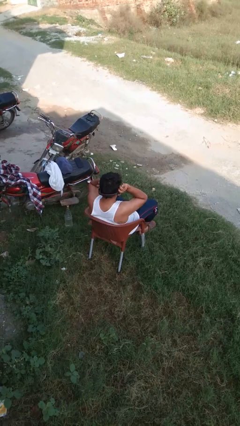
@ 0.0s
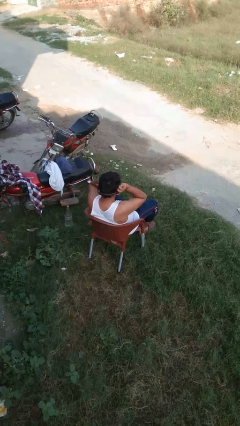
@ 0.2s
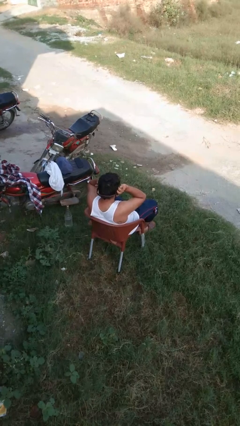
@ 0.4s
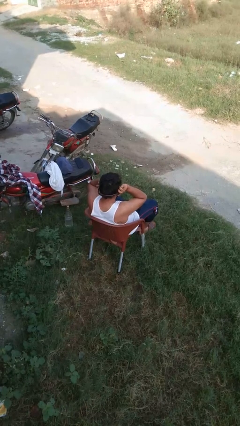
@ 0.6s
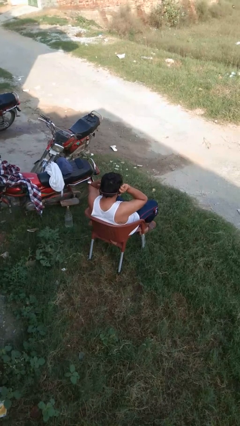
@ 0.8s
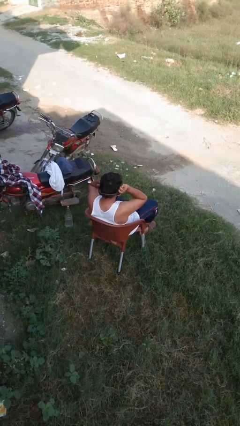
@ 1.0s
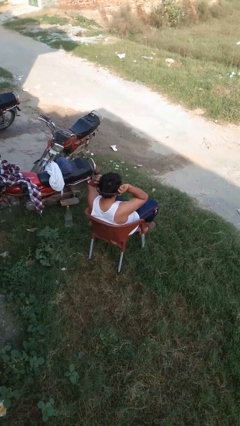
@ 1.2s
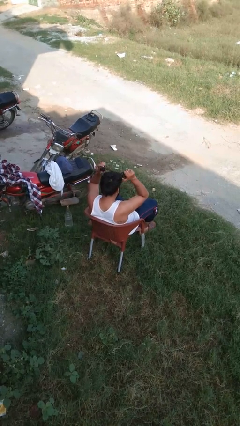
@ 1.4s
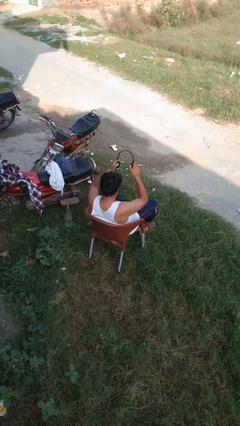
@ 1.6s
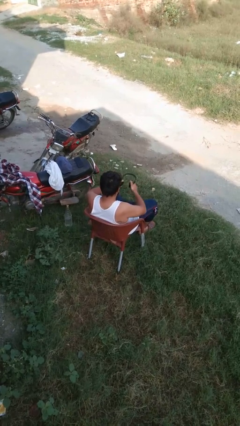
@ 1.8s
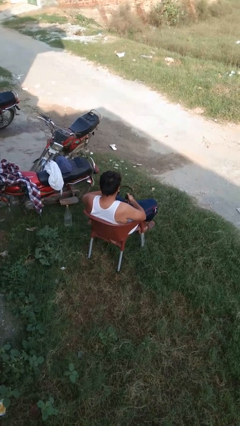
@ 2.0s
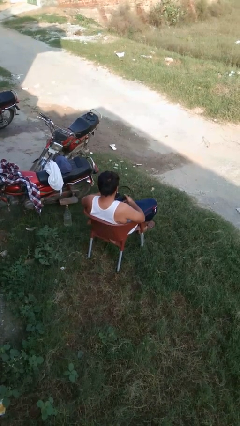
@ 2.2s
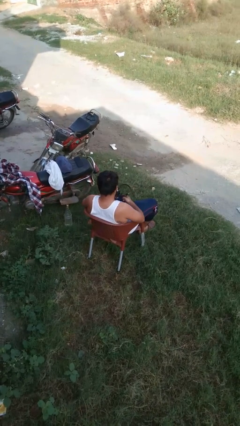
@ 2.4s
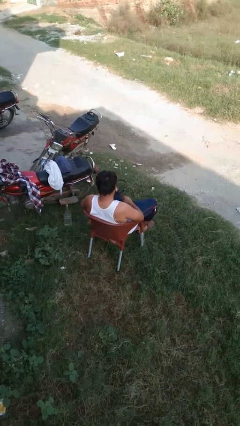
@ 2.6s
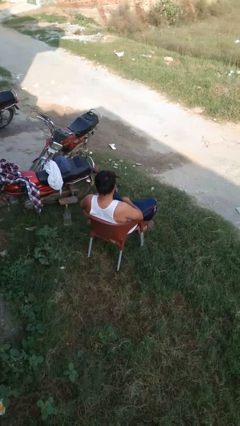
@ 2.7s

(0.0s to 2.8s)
person takes off headphones

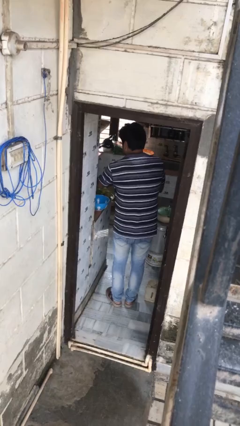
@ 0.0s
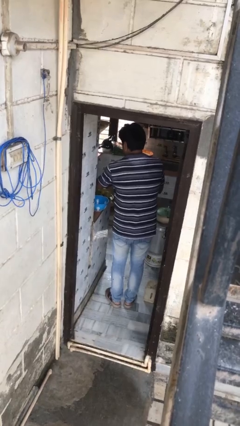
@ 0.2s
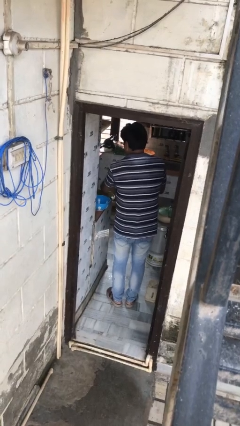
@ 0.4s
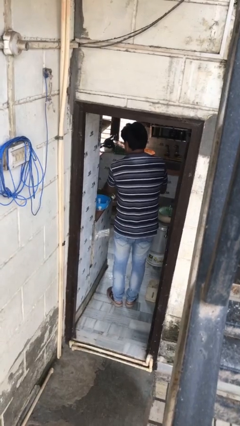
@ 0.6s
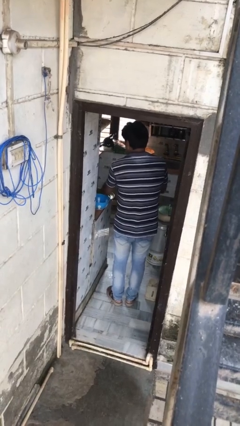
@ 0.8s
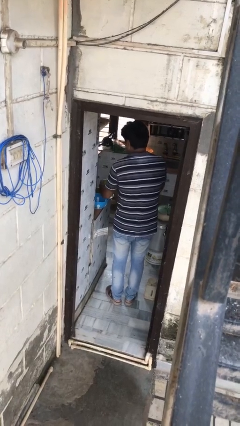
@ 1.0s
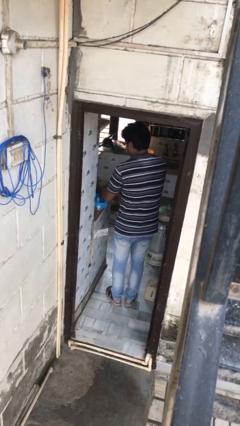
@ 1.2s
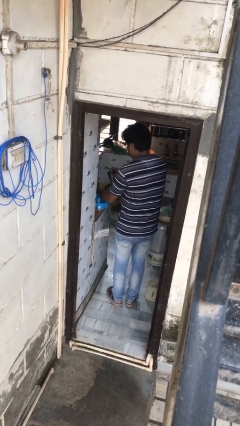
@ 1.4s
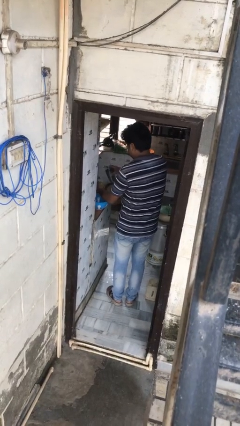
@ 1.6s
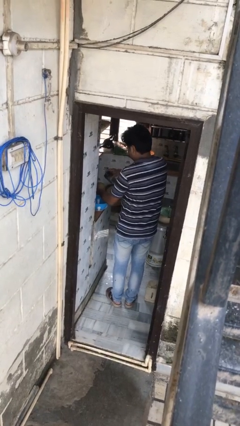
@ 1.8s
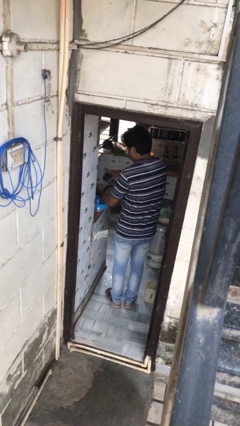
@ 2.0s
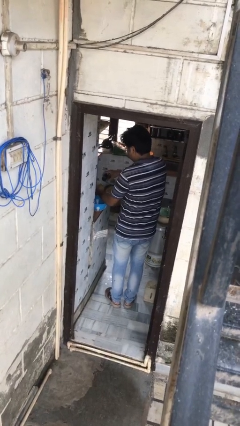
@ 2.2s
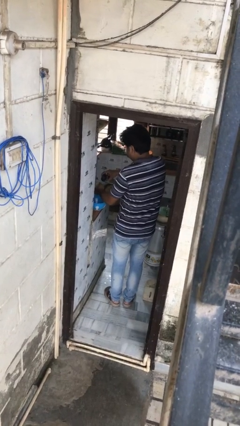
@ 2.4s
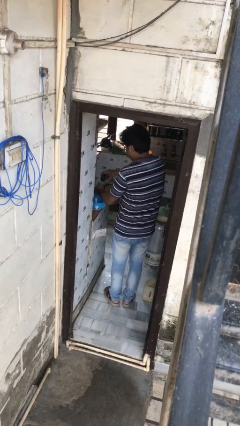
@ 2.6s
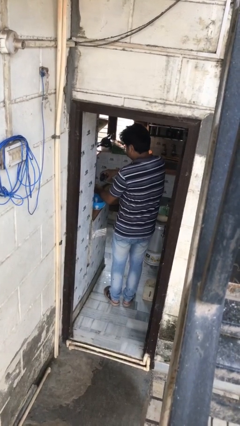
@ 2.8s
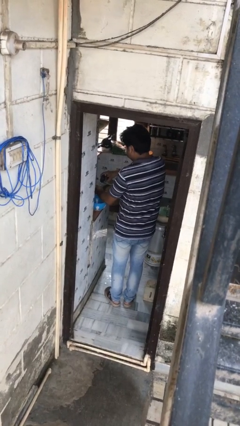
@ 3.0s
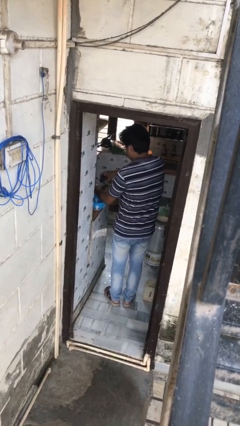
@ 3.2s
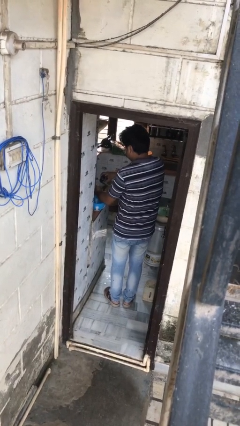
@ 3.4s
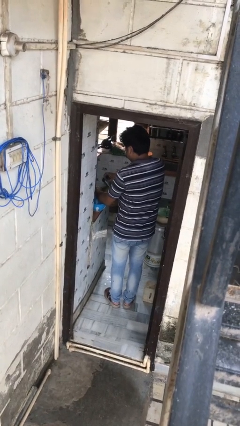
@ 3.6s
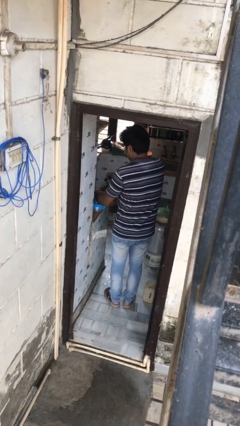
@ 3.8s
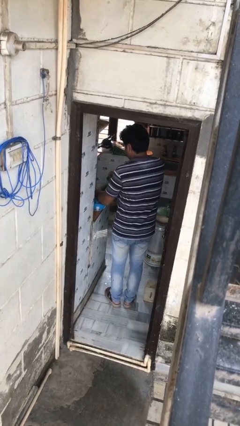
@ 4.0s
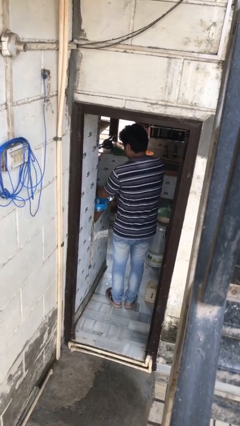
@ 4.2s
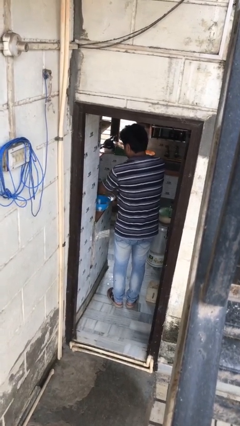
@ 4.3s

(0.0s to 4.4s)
person washes dish

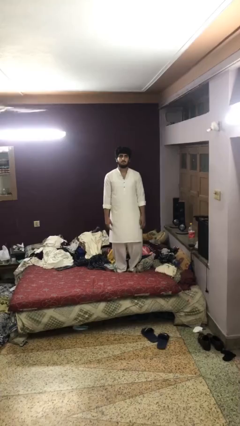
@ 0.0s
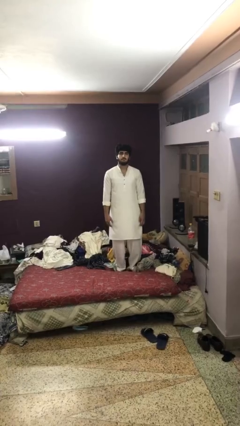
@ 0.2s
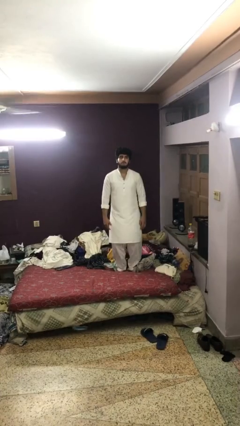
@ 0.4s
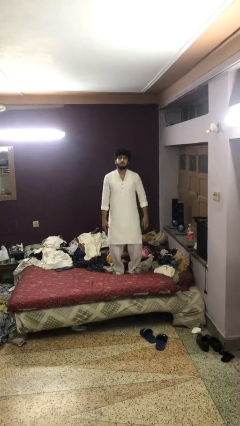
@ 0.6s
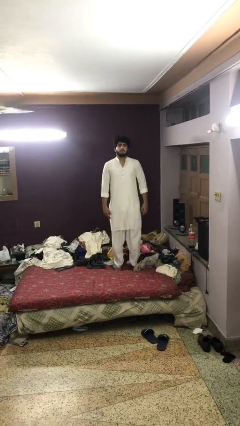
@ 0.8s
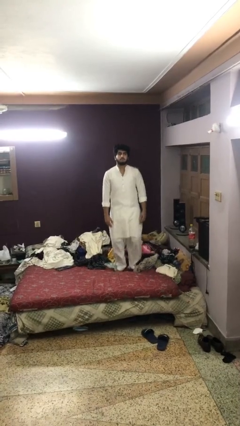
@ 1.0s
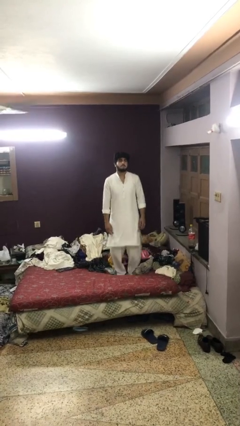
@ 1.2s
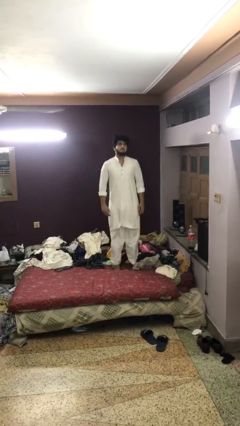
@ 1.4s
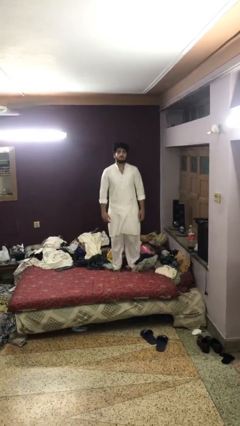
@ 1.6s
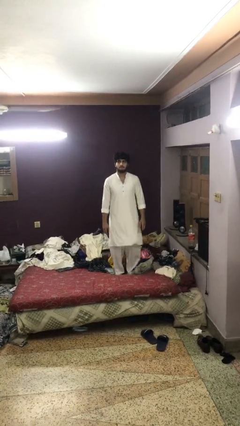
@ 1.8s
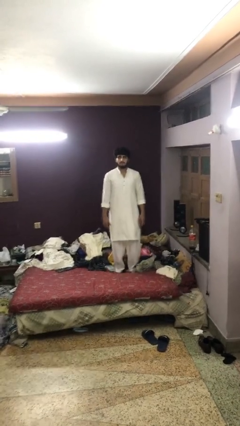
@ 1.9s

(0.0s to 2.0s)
person jumps on bed

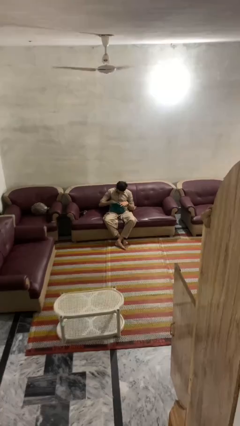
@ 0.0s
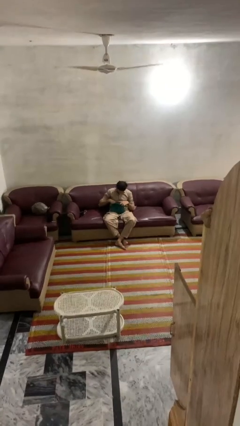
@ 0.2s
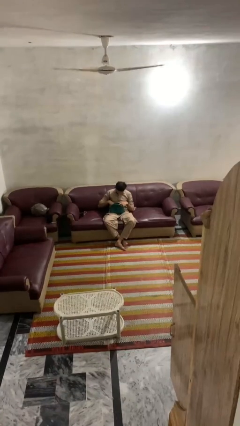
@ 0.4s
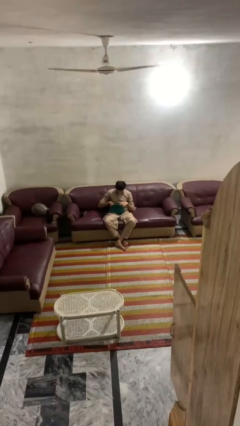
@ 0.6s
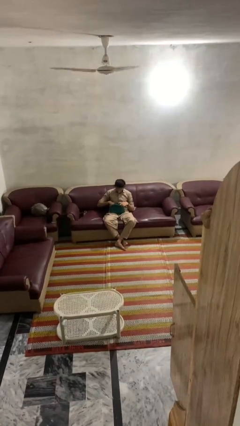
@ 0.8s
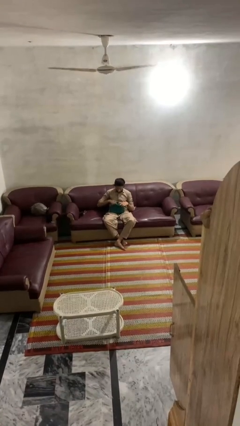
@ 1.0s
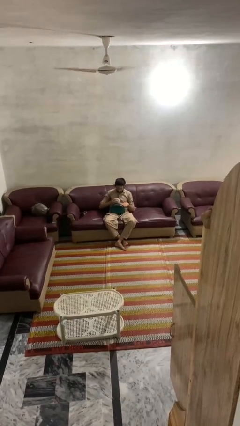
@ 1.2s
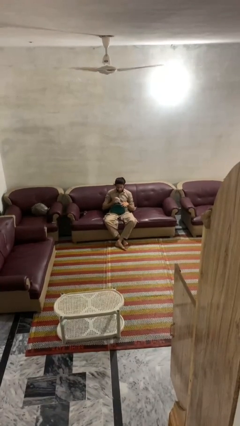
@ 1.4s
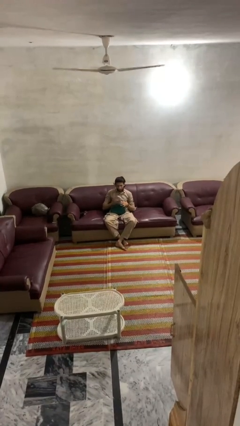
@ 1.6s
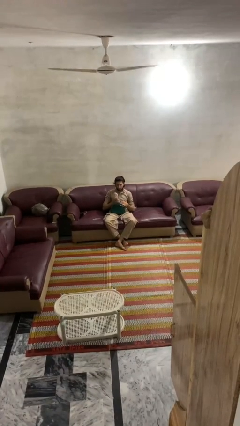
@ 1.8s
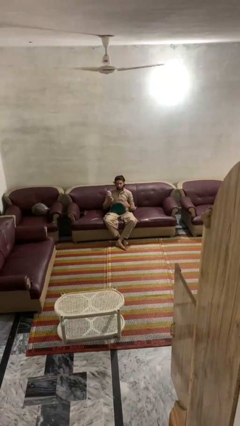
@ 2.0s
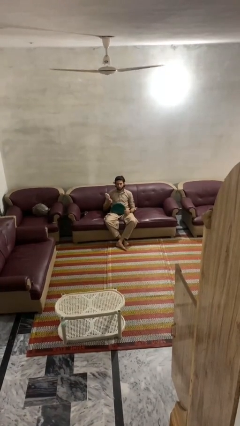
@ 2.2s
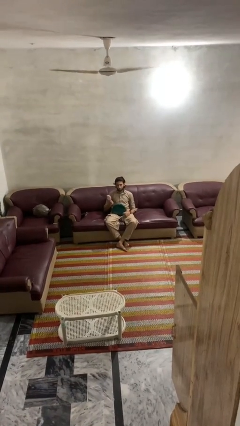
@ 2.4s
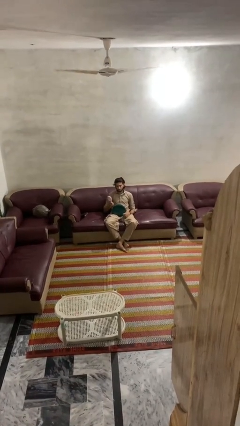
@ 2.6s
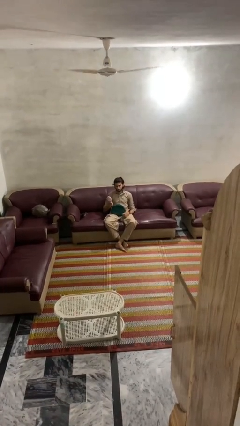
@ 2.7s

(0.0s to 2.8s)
person takes object from purse

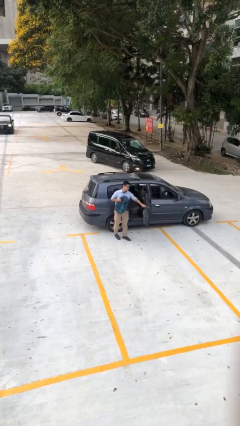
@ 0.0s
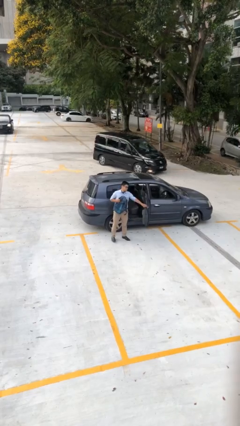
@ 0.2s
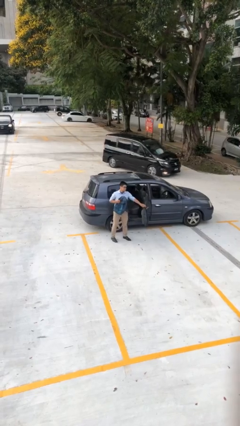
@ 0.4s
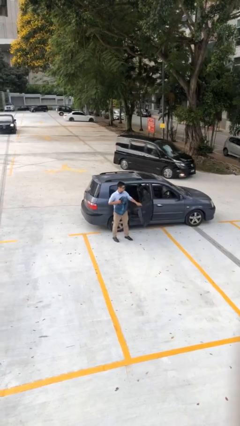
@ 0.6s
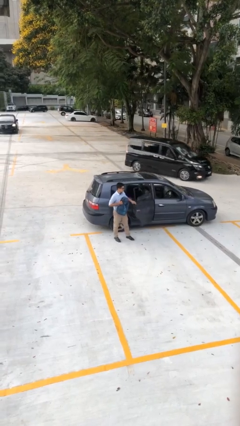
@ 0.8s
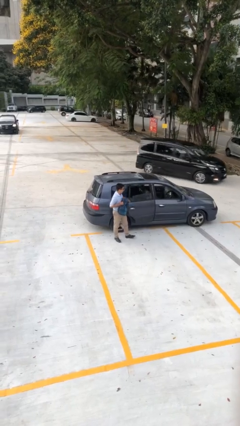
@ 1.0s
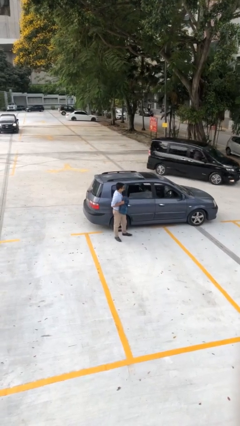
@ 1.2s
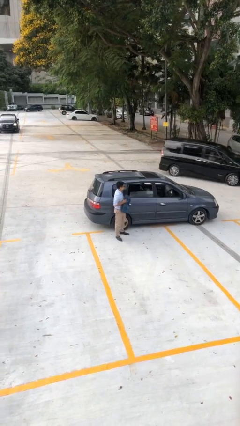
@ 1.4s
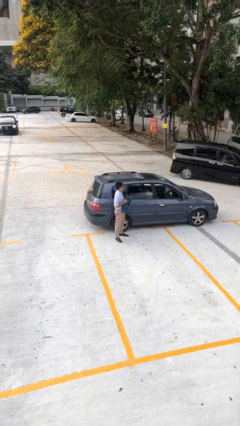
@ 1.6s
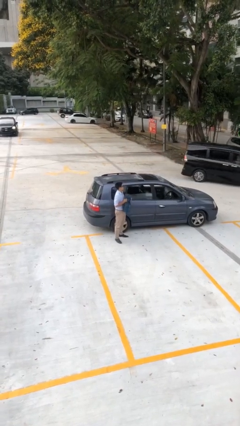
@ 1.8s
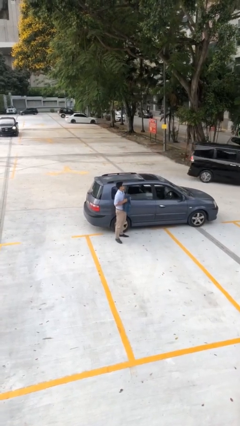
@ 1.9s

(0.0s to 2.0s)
person closes car door

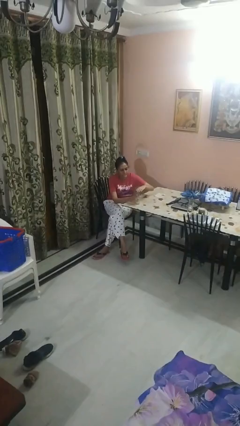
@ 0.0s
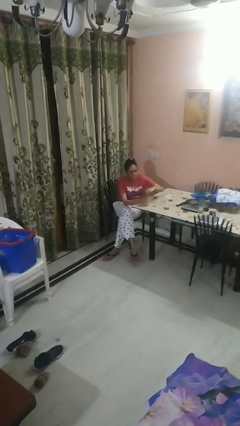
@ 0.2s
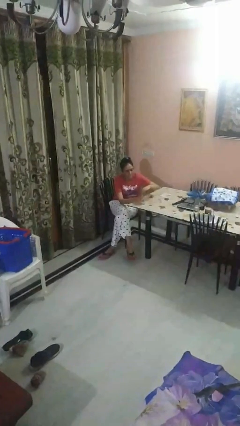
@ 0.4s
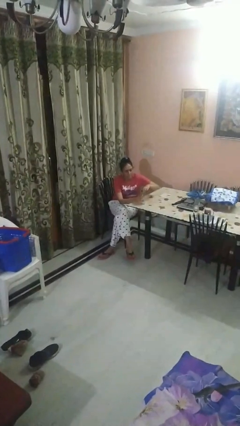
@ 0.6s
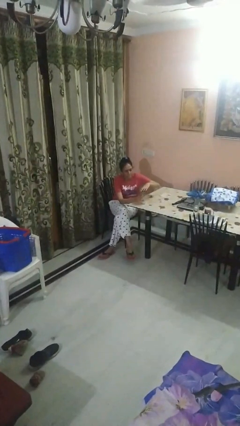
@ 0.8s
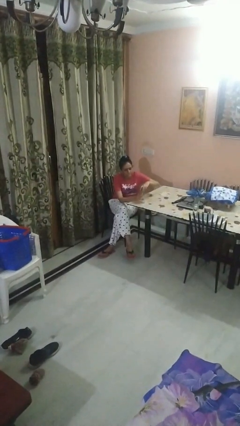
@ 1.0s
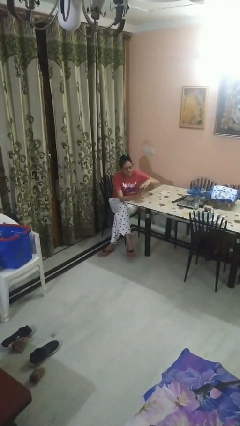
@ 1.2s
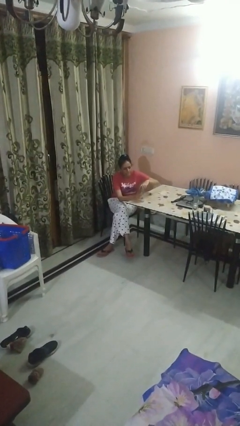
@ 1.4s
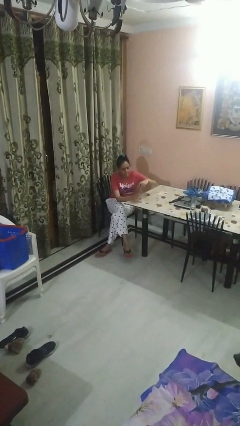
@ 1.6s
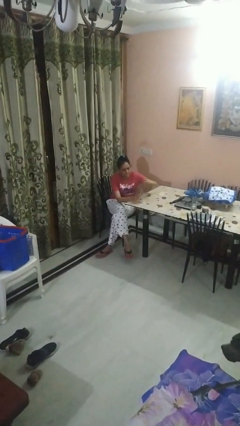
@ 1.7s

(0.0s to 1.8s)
person unscrews lid from bottle

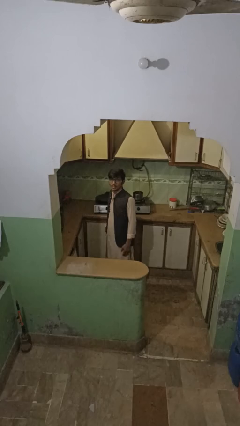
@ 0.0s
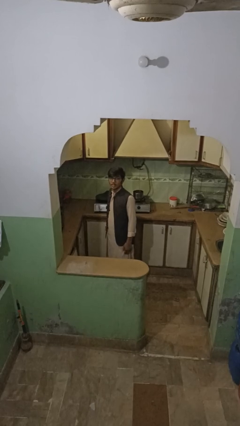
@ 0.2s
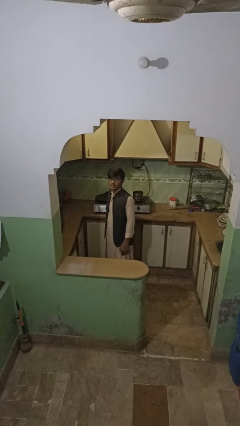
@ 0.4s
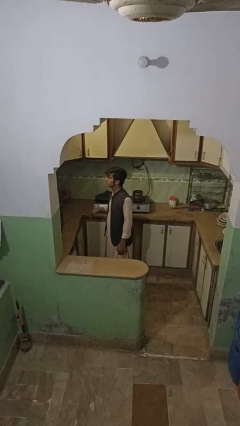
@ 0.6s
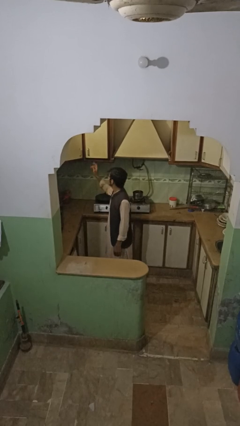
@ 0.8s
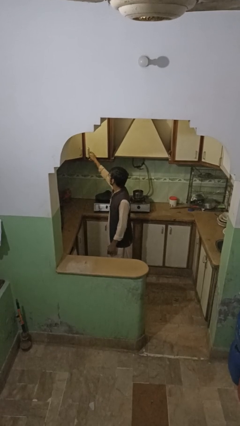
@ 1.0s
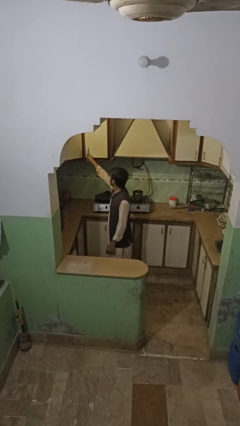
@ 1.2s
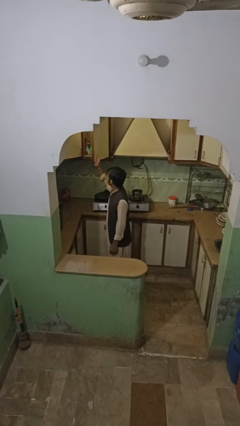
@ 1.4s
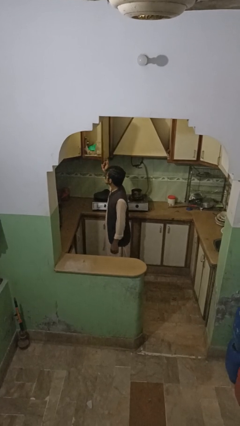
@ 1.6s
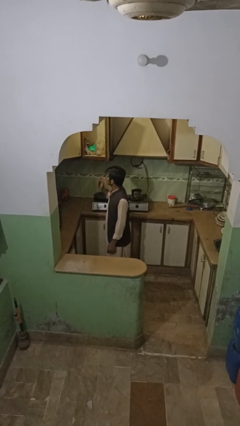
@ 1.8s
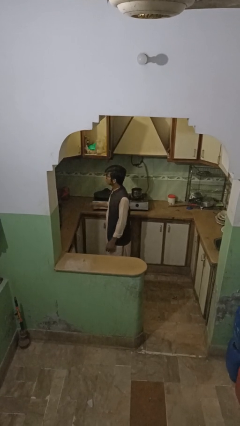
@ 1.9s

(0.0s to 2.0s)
person opens cabinet
